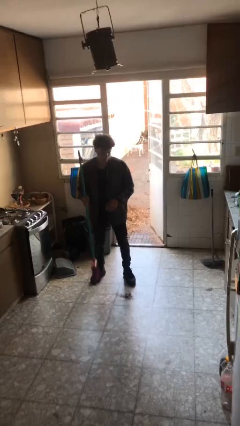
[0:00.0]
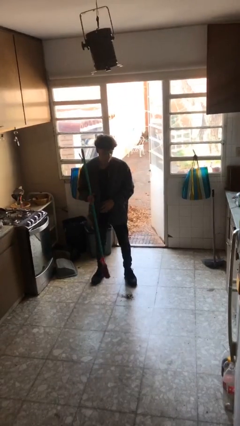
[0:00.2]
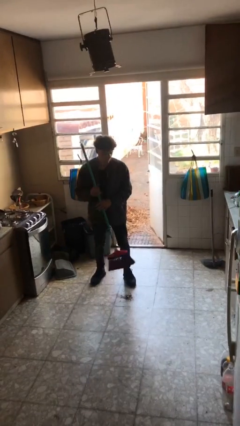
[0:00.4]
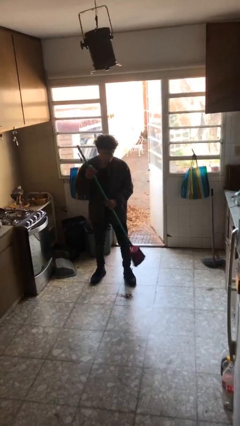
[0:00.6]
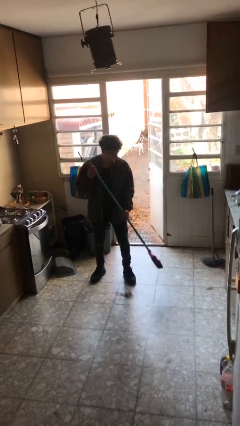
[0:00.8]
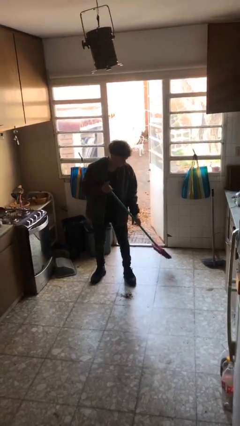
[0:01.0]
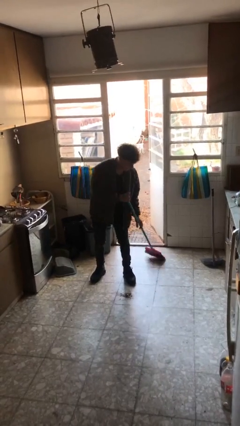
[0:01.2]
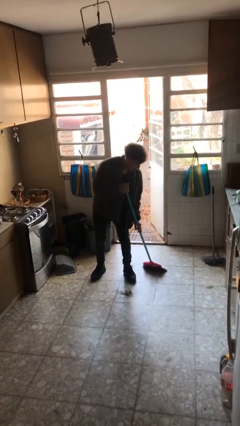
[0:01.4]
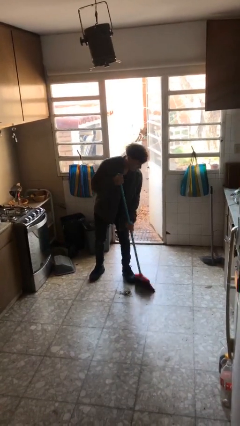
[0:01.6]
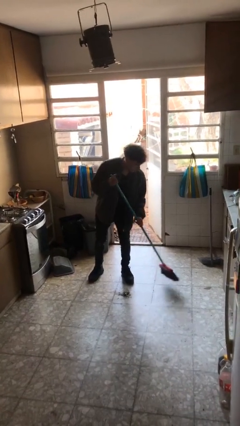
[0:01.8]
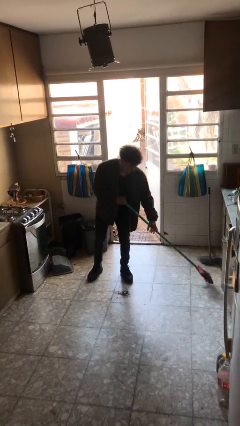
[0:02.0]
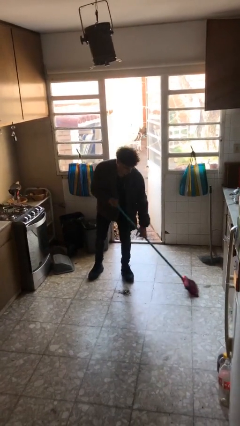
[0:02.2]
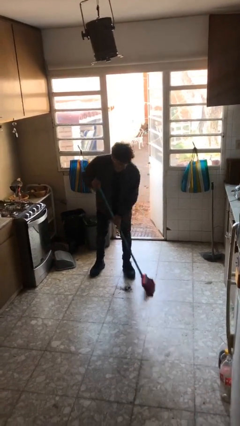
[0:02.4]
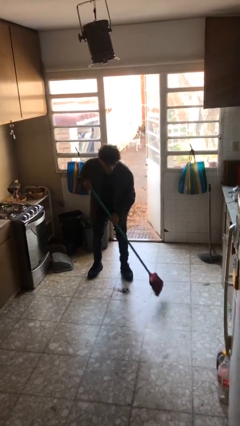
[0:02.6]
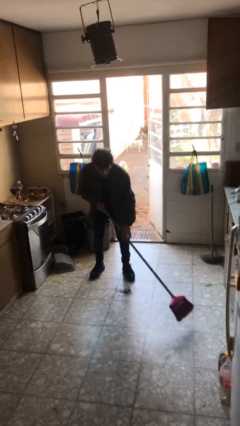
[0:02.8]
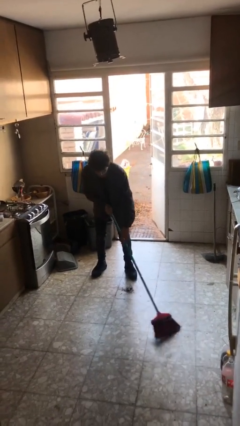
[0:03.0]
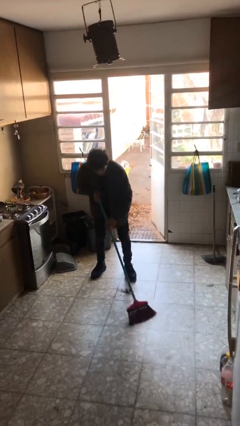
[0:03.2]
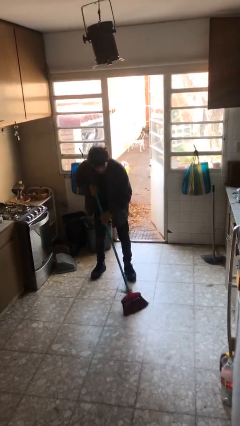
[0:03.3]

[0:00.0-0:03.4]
person sweeps floor

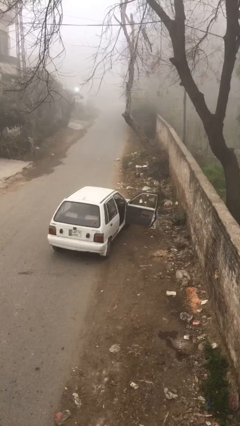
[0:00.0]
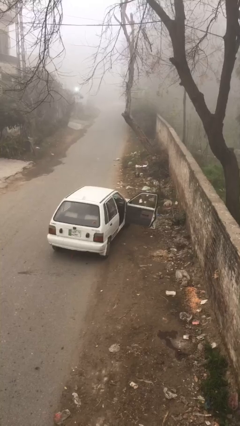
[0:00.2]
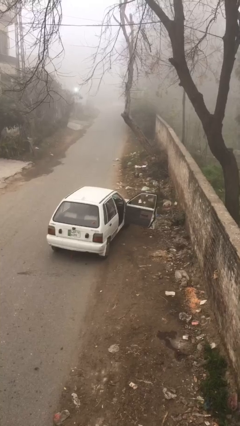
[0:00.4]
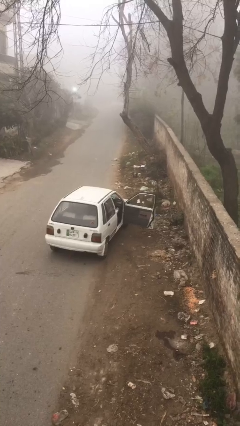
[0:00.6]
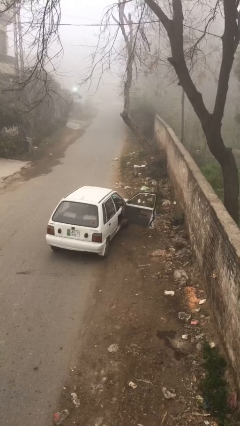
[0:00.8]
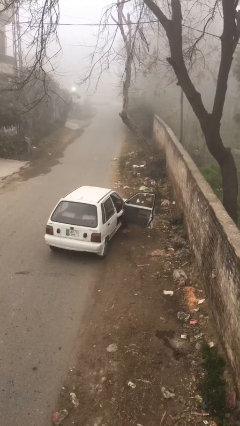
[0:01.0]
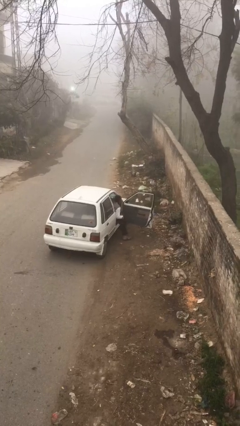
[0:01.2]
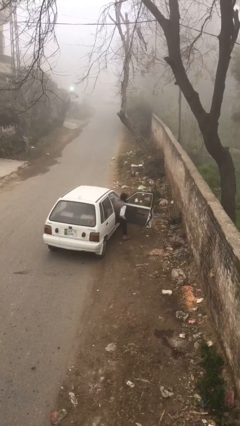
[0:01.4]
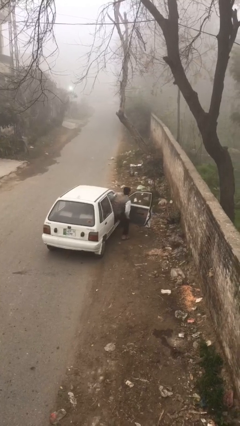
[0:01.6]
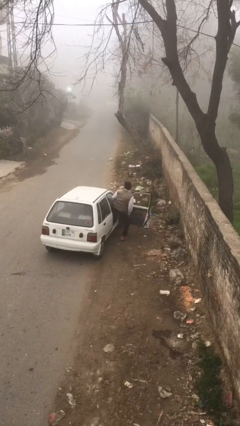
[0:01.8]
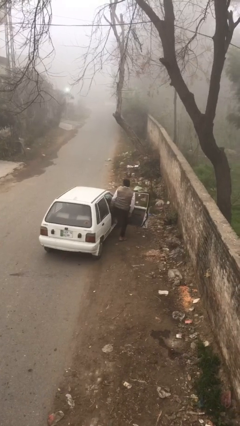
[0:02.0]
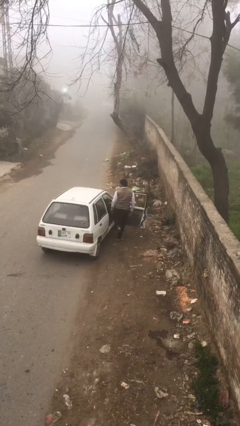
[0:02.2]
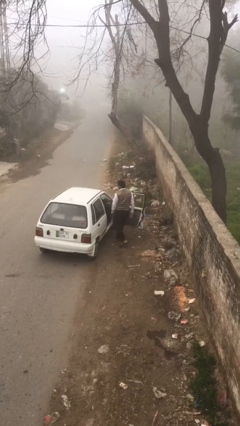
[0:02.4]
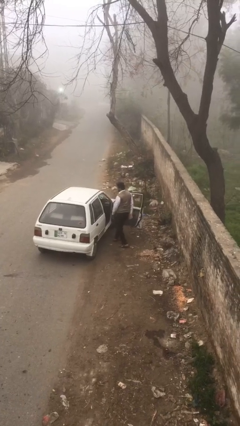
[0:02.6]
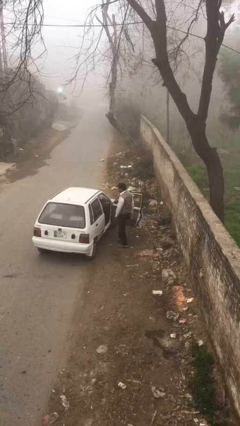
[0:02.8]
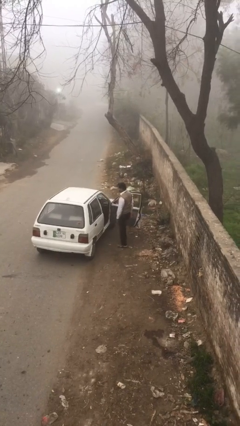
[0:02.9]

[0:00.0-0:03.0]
person exits car

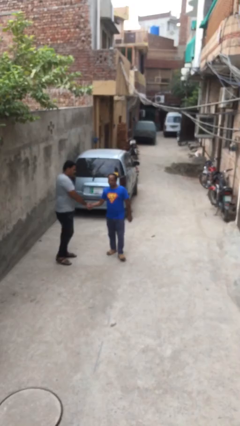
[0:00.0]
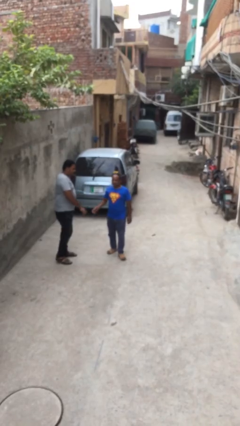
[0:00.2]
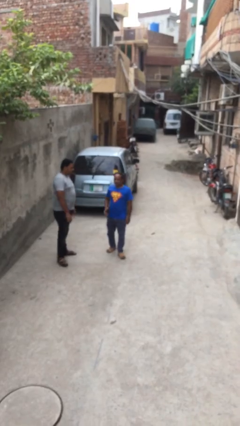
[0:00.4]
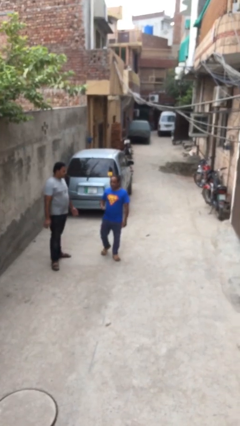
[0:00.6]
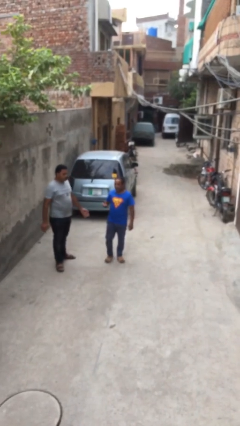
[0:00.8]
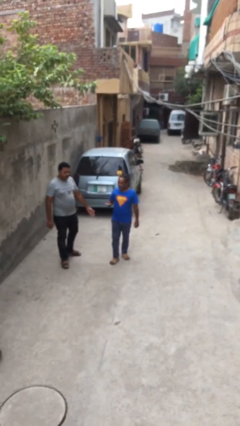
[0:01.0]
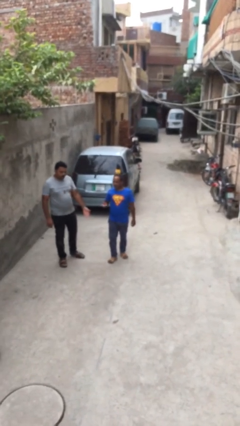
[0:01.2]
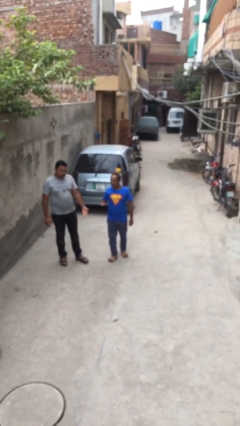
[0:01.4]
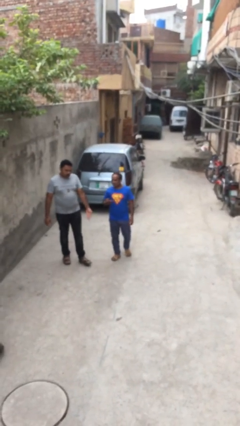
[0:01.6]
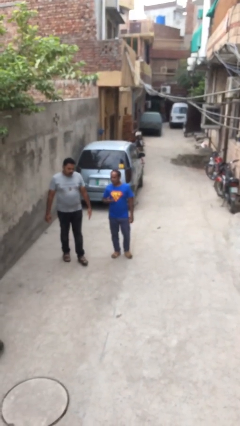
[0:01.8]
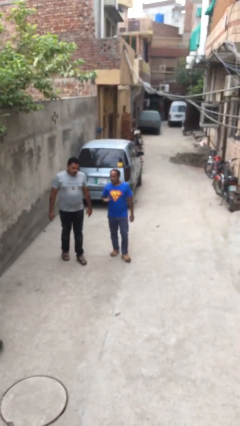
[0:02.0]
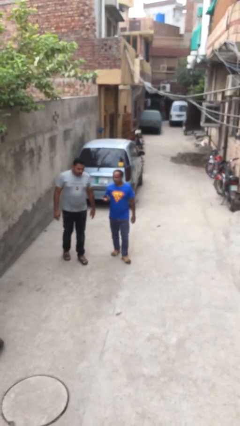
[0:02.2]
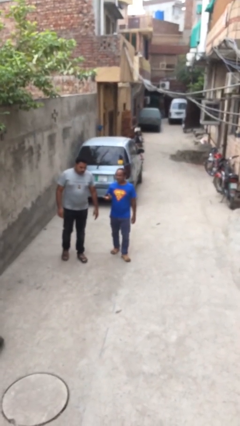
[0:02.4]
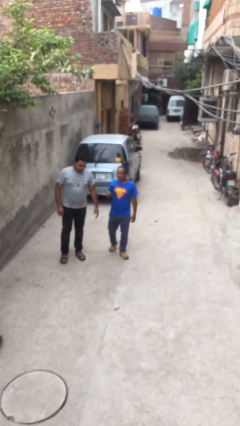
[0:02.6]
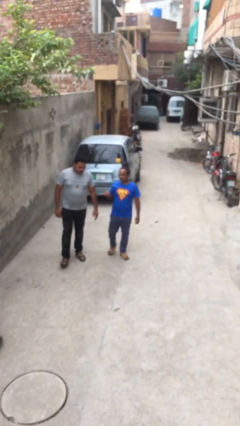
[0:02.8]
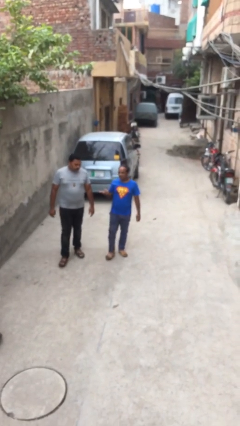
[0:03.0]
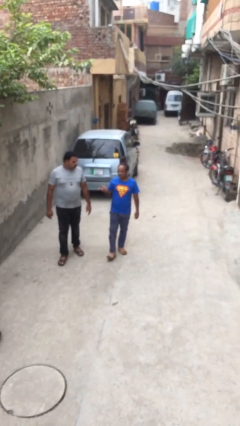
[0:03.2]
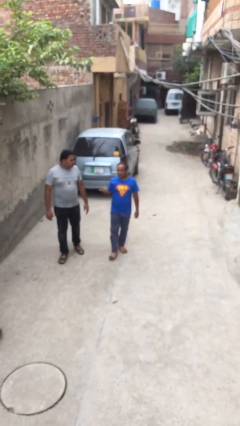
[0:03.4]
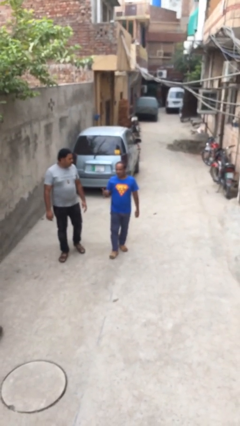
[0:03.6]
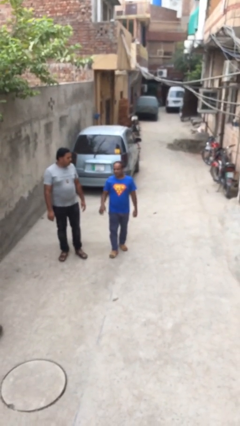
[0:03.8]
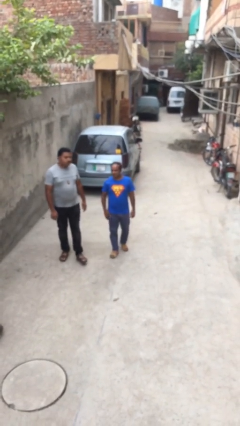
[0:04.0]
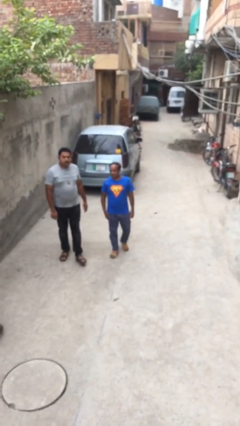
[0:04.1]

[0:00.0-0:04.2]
person talks to person

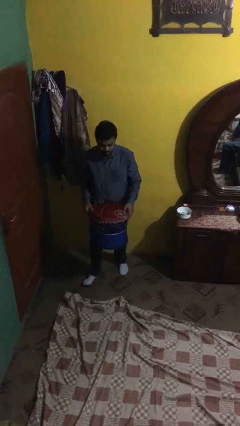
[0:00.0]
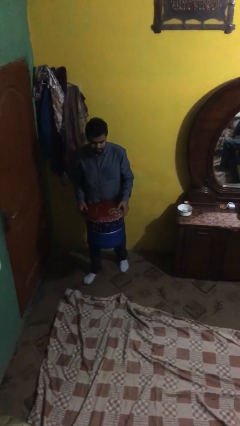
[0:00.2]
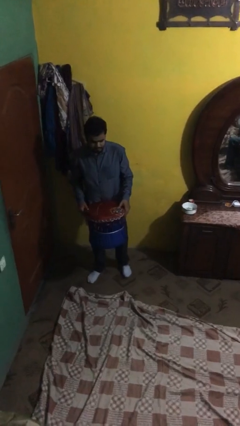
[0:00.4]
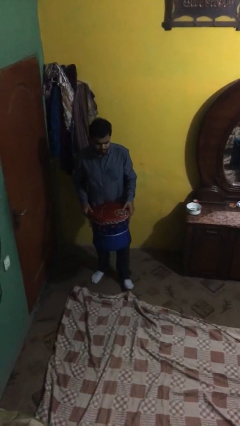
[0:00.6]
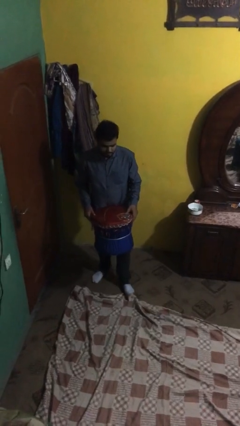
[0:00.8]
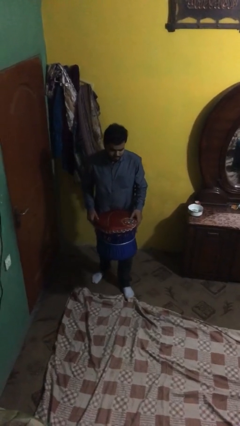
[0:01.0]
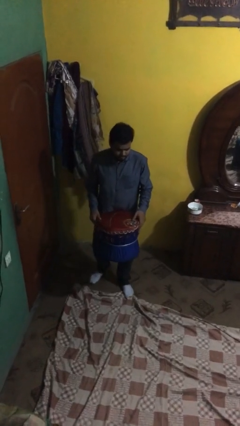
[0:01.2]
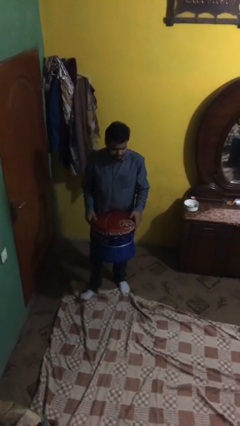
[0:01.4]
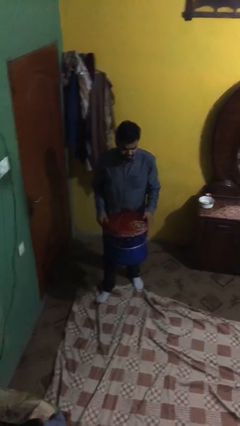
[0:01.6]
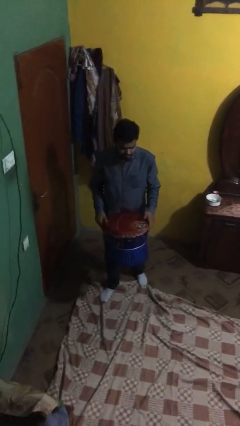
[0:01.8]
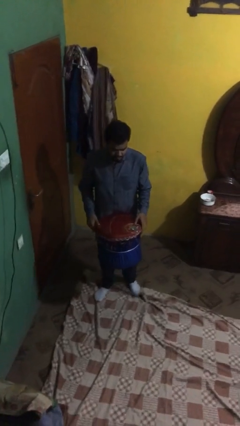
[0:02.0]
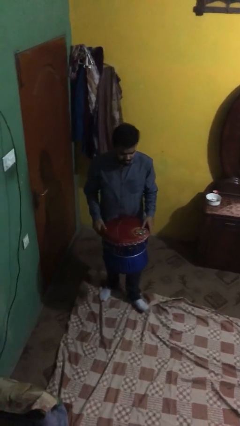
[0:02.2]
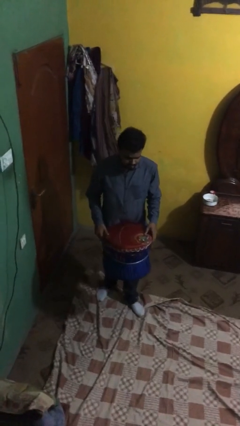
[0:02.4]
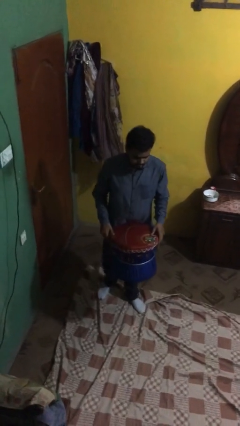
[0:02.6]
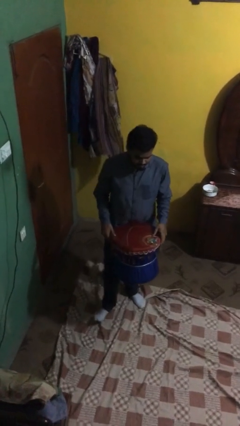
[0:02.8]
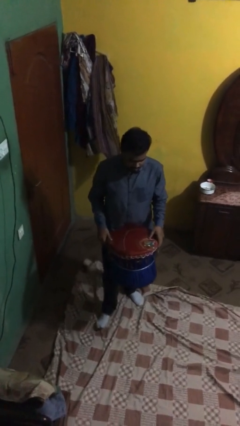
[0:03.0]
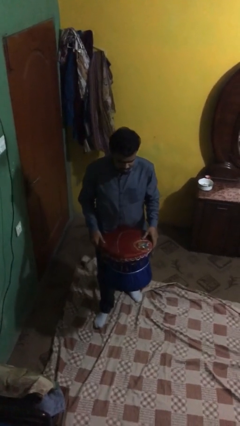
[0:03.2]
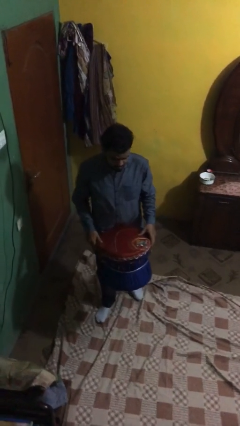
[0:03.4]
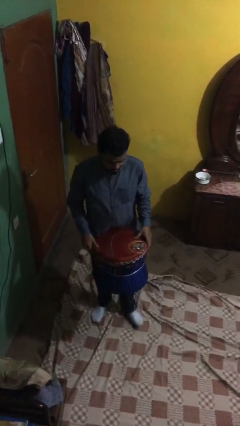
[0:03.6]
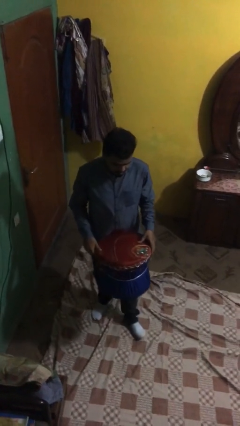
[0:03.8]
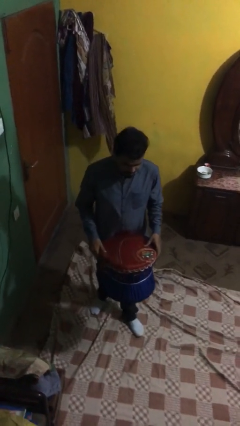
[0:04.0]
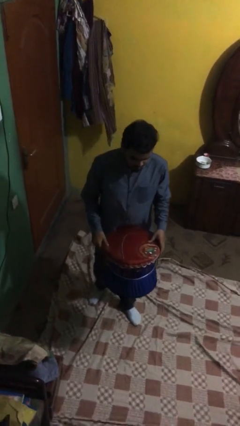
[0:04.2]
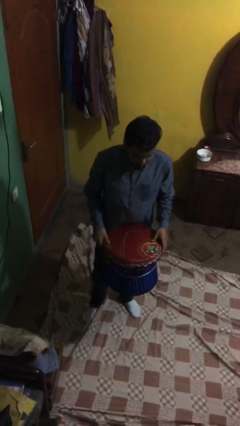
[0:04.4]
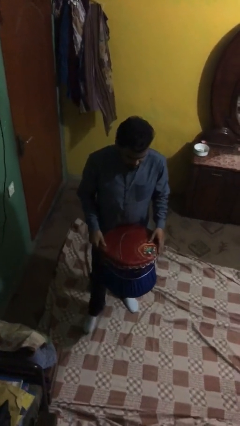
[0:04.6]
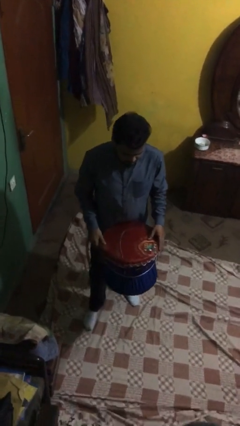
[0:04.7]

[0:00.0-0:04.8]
person carries heavy object

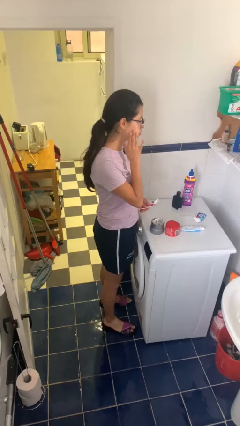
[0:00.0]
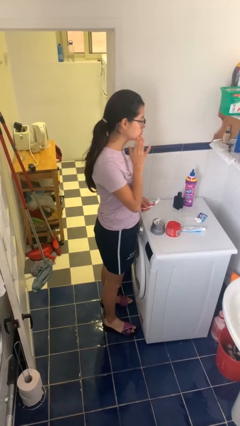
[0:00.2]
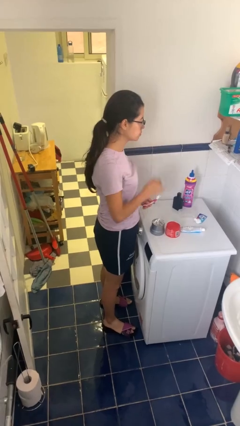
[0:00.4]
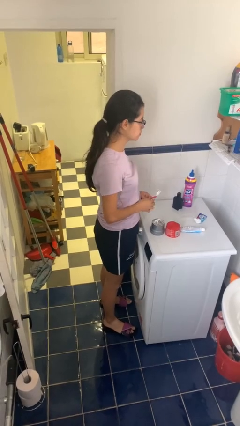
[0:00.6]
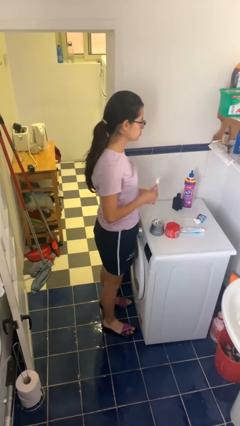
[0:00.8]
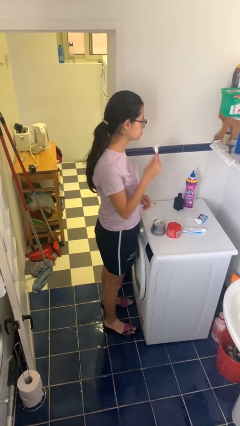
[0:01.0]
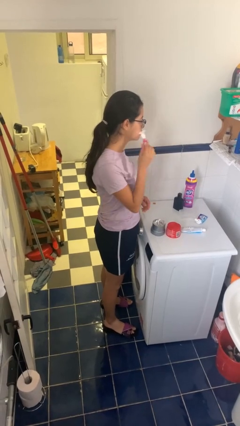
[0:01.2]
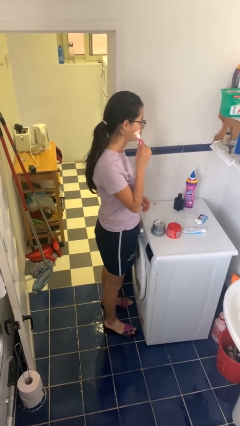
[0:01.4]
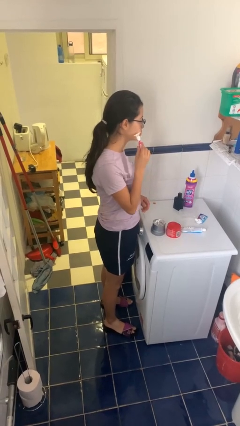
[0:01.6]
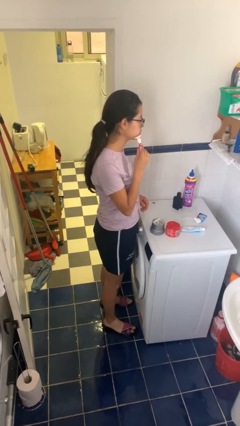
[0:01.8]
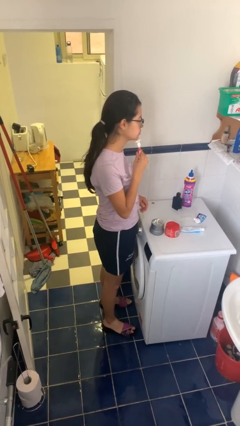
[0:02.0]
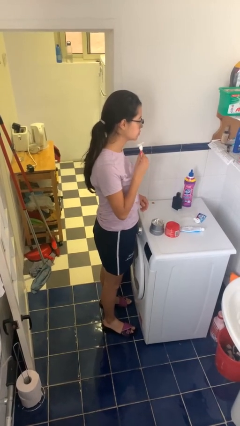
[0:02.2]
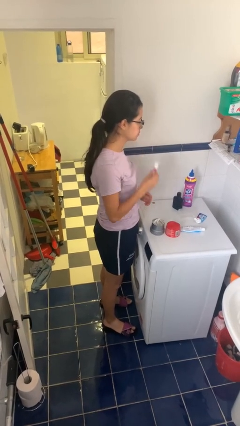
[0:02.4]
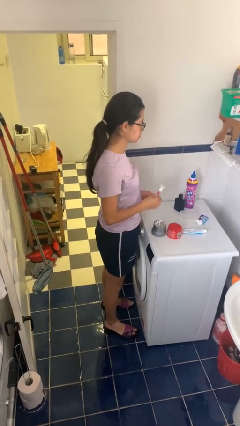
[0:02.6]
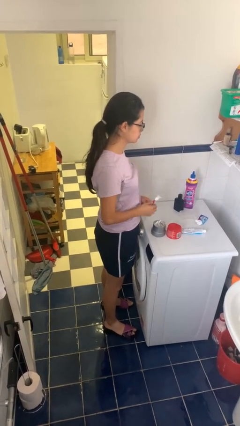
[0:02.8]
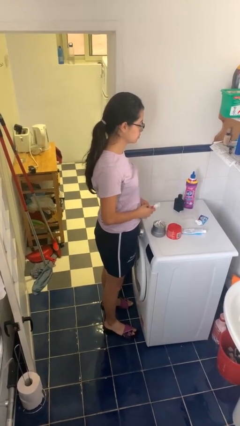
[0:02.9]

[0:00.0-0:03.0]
person shaves face
